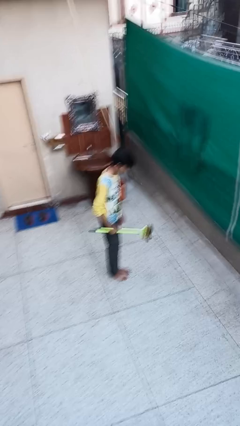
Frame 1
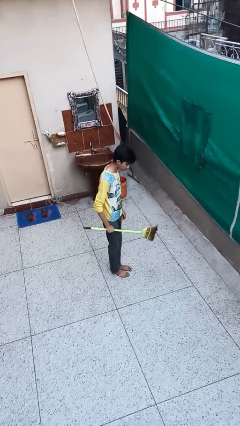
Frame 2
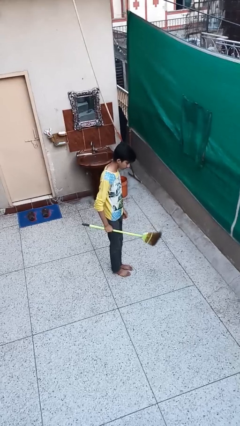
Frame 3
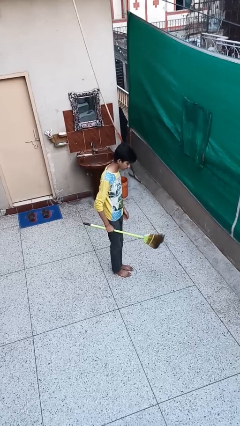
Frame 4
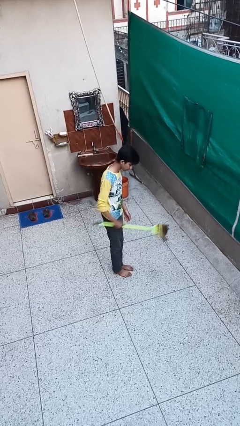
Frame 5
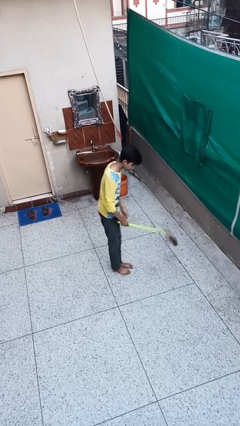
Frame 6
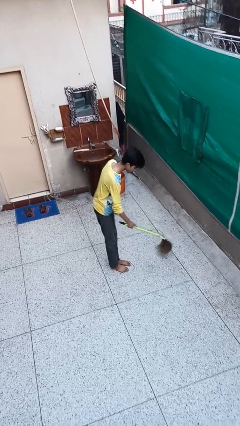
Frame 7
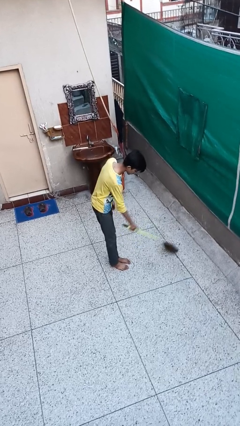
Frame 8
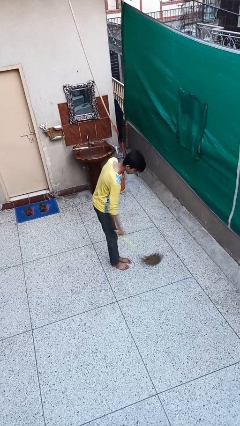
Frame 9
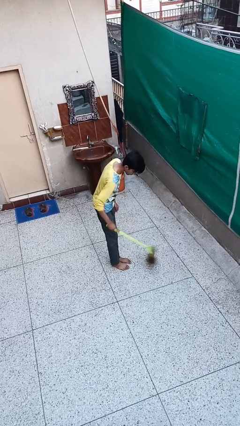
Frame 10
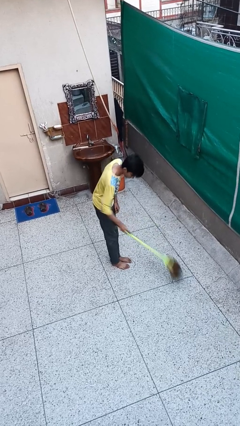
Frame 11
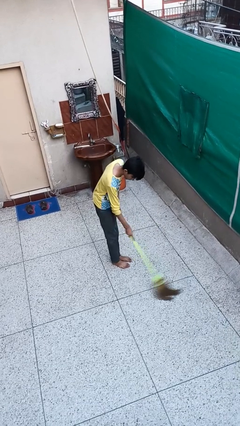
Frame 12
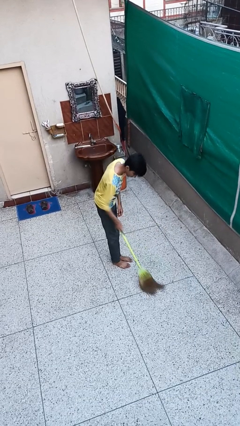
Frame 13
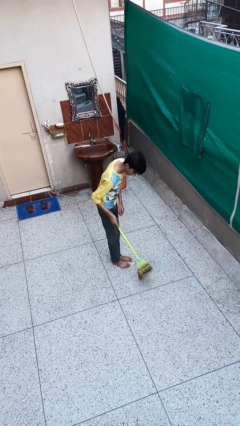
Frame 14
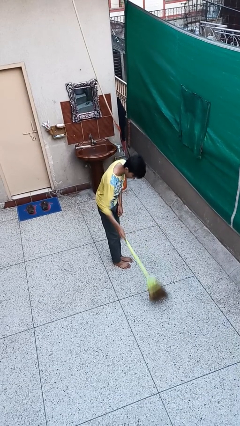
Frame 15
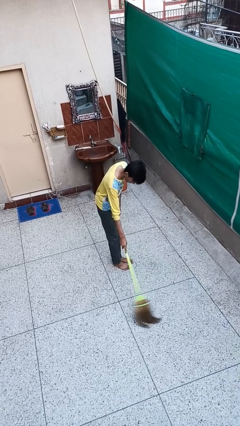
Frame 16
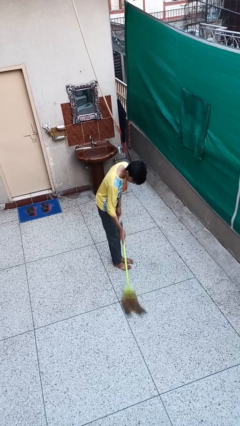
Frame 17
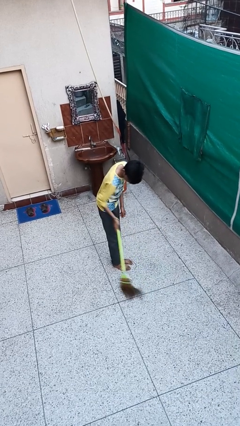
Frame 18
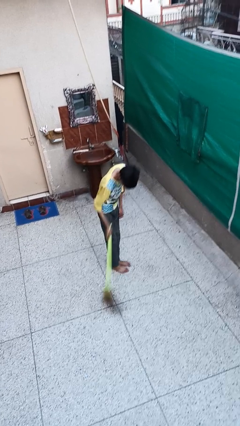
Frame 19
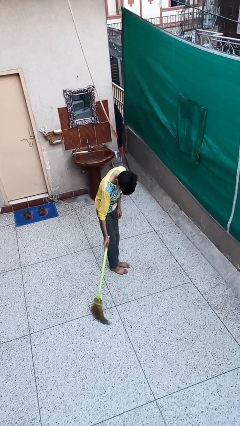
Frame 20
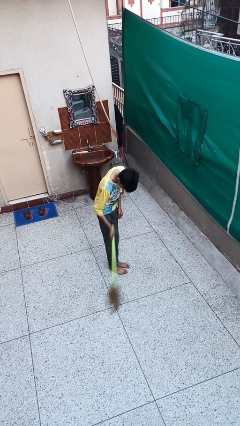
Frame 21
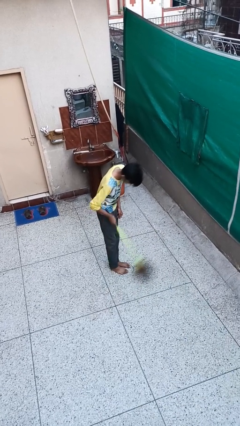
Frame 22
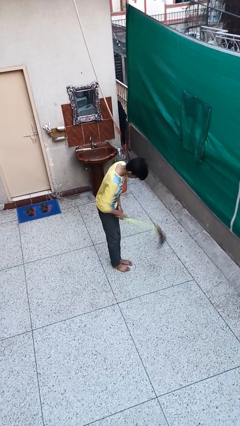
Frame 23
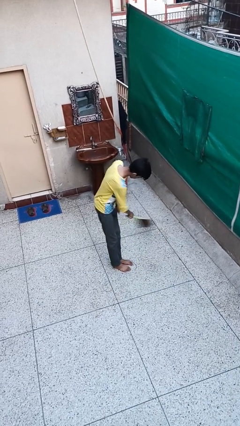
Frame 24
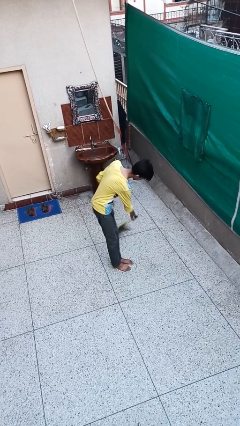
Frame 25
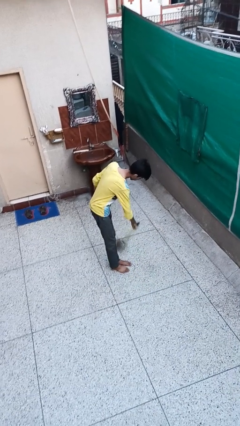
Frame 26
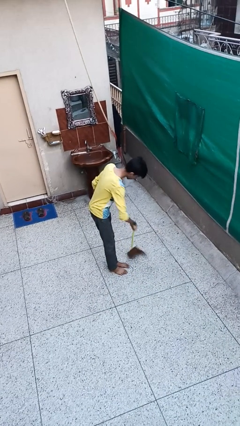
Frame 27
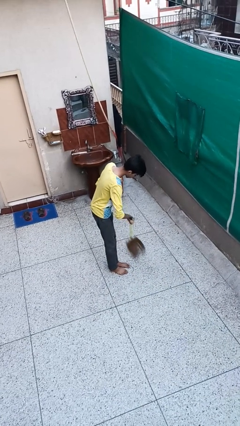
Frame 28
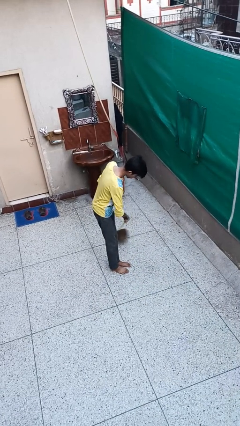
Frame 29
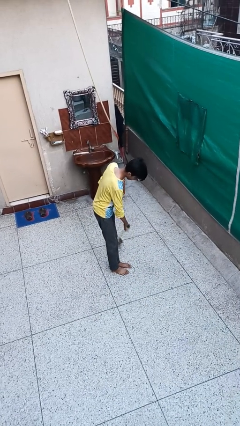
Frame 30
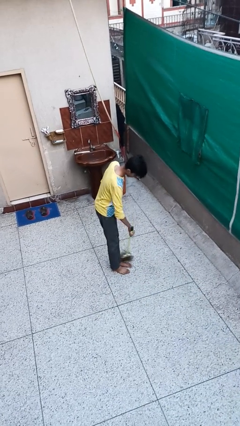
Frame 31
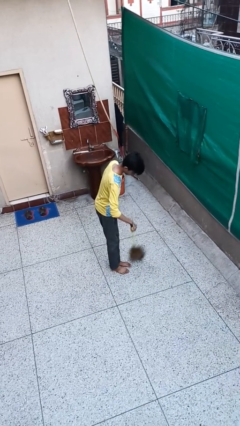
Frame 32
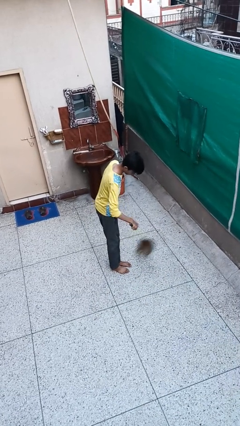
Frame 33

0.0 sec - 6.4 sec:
person sweeps floor

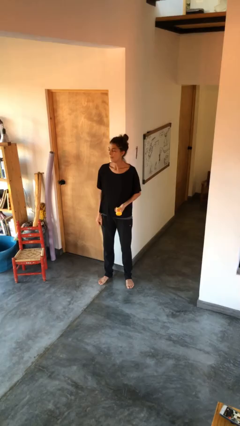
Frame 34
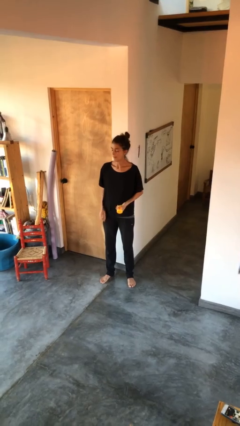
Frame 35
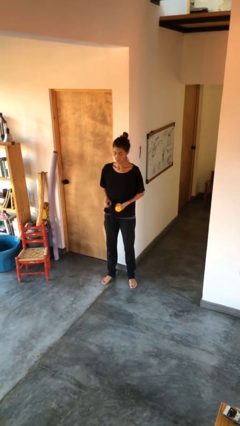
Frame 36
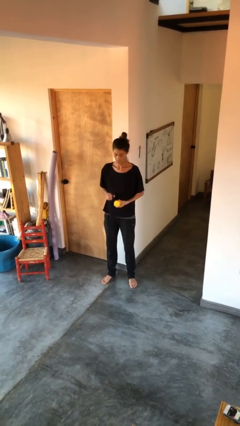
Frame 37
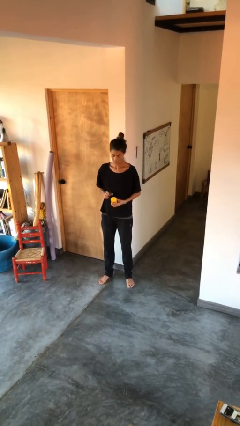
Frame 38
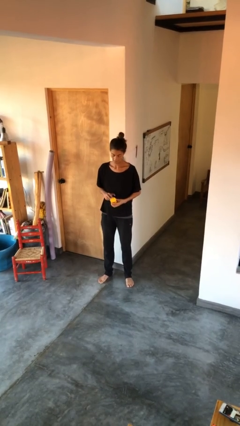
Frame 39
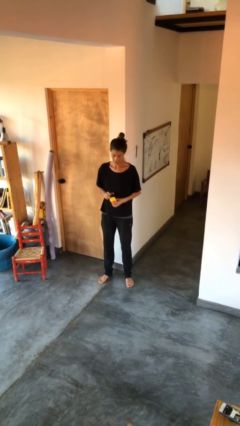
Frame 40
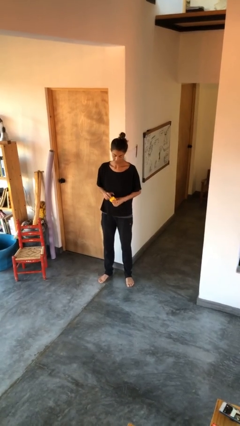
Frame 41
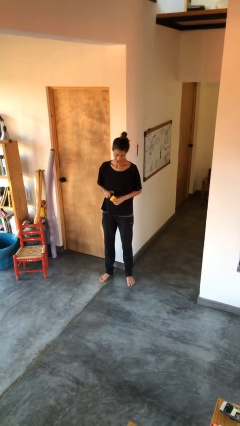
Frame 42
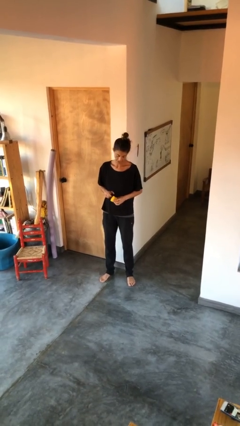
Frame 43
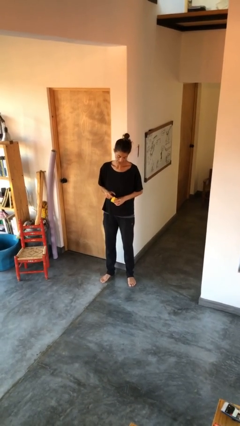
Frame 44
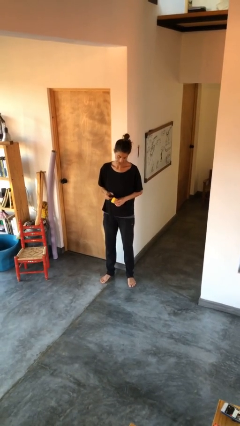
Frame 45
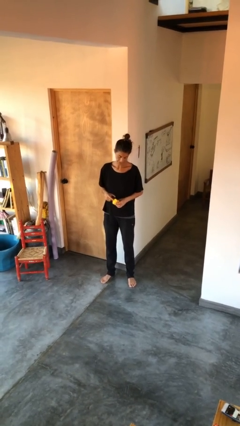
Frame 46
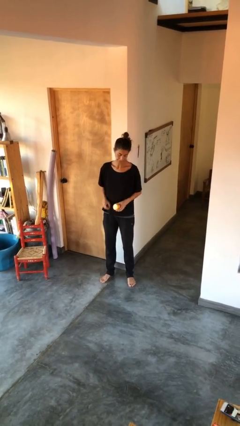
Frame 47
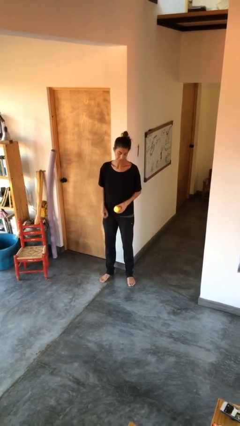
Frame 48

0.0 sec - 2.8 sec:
person taps object with finger

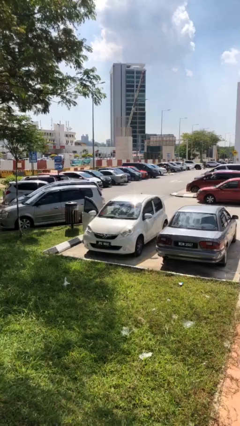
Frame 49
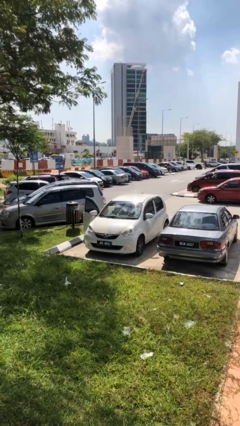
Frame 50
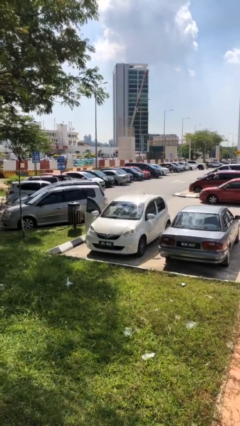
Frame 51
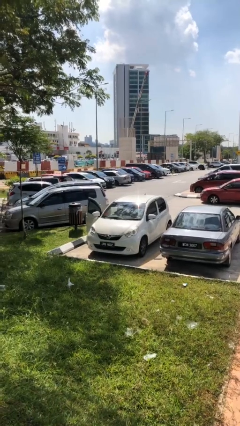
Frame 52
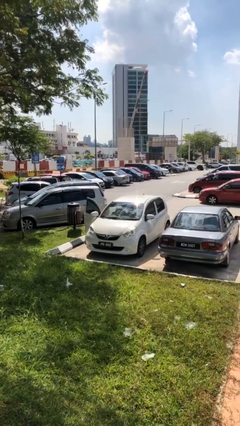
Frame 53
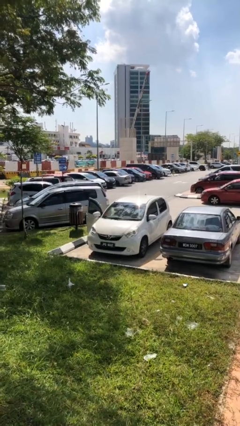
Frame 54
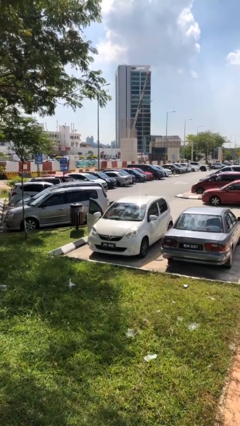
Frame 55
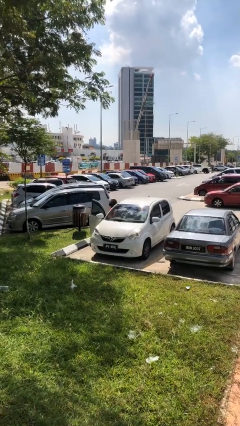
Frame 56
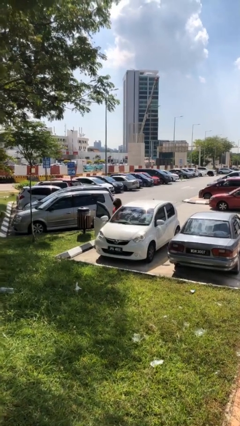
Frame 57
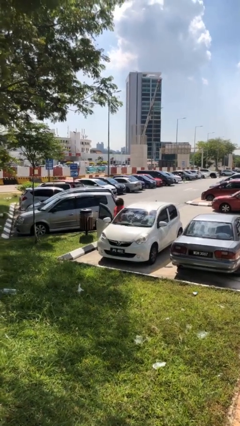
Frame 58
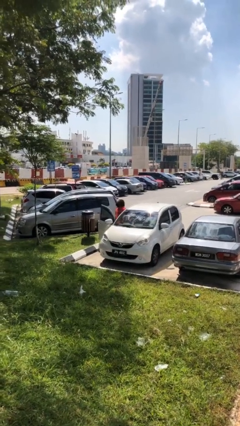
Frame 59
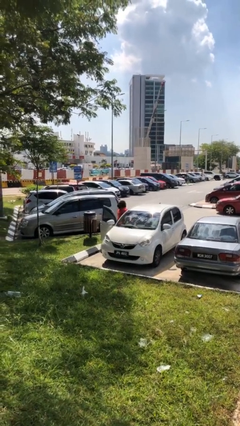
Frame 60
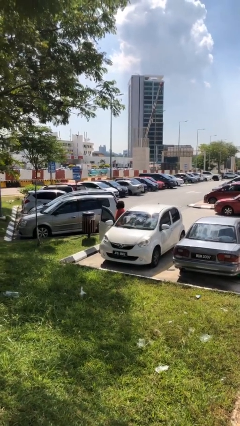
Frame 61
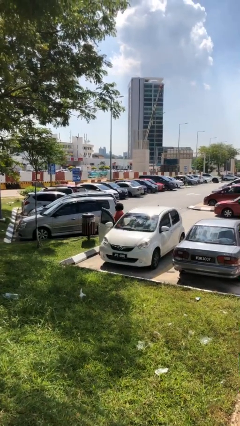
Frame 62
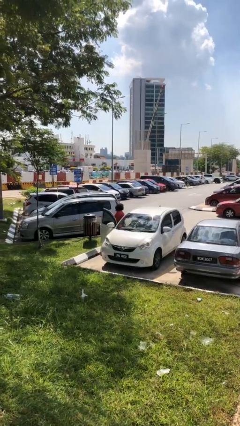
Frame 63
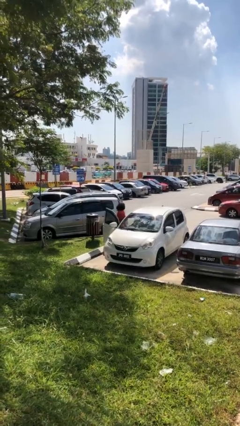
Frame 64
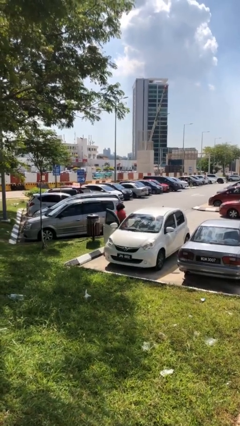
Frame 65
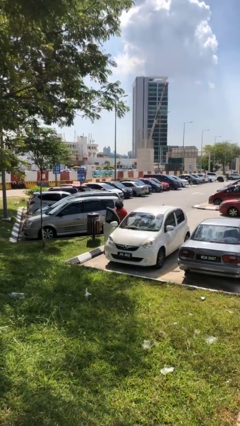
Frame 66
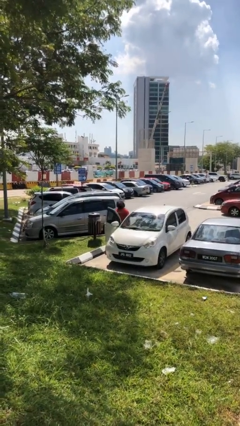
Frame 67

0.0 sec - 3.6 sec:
person exits car

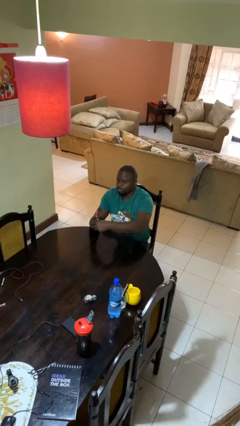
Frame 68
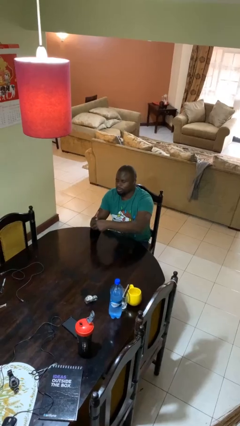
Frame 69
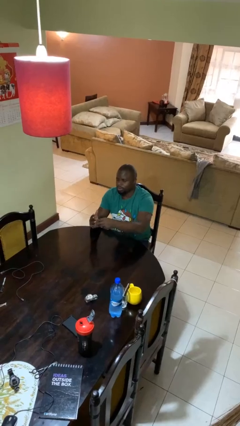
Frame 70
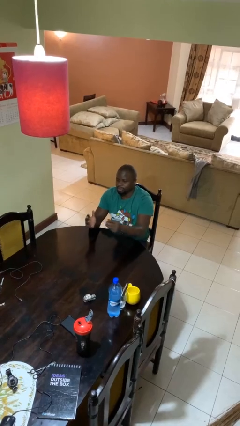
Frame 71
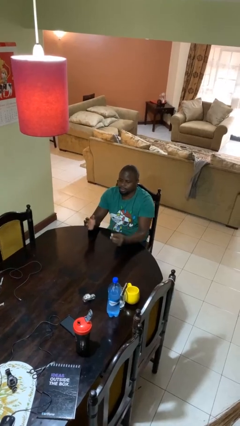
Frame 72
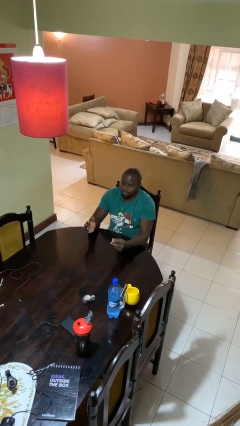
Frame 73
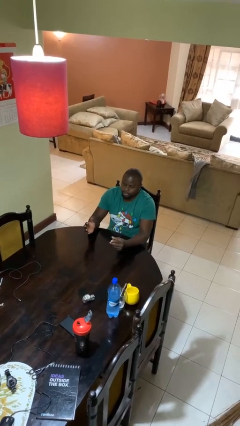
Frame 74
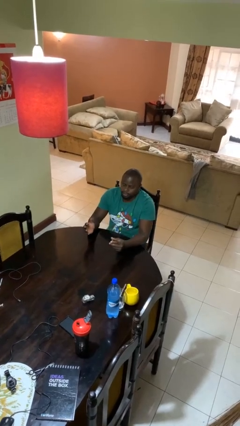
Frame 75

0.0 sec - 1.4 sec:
person takes off ring

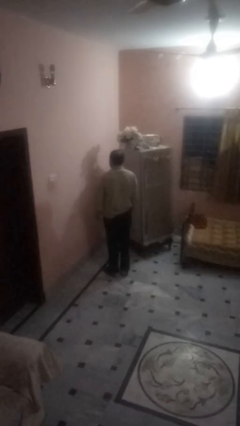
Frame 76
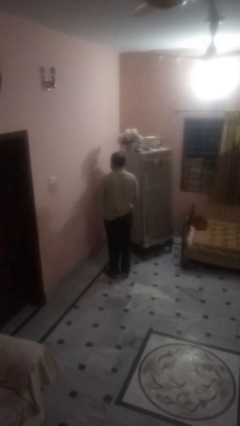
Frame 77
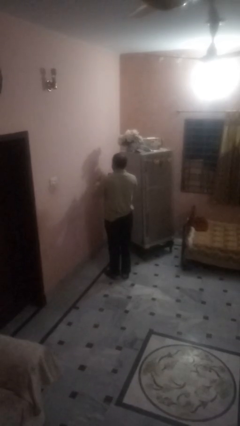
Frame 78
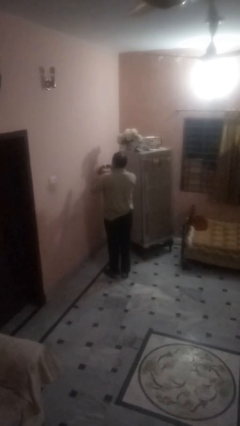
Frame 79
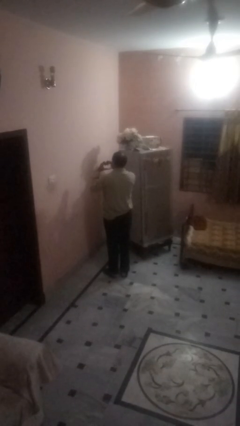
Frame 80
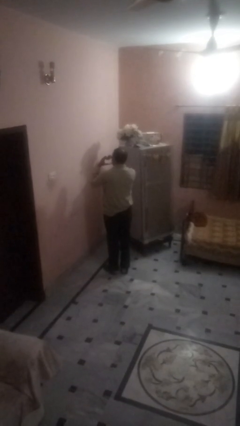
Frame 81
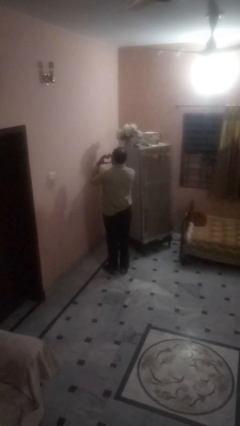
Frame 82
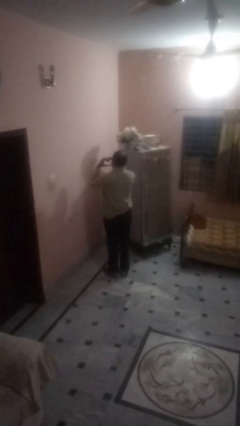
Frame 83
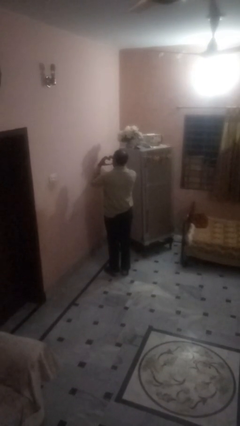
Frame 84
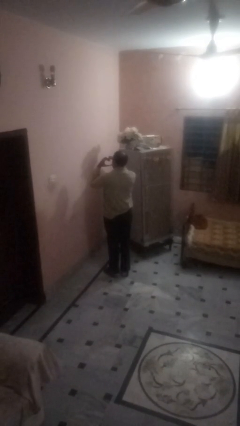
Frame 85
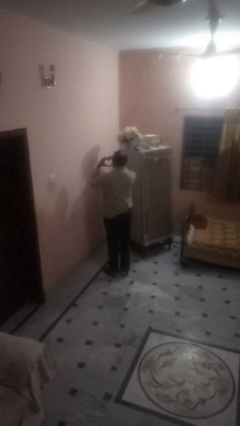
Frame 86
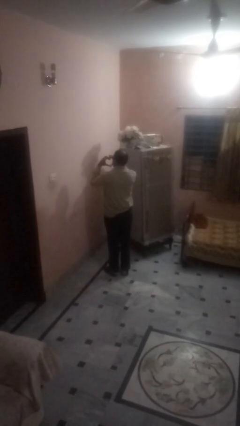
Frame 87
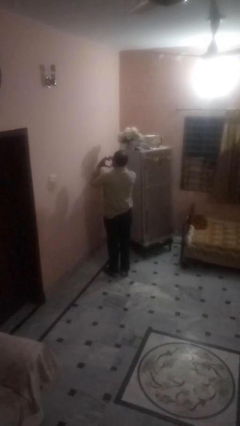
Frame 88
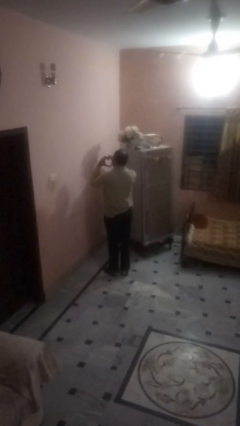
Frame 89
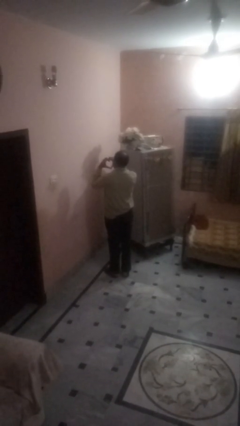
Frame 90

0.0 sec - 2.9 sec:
person gestures heart

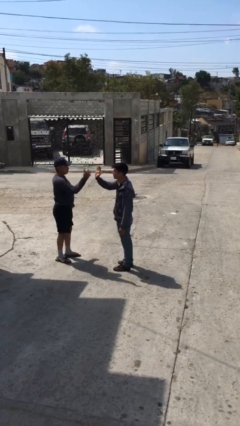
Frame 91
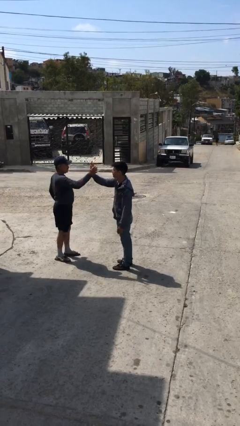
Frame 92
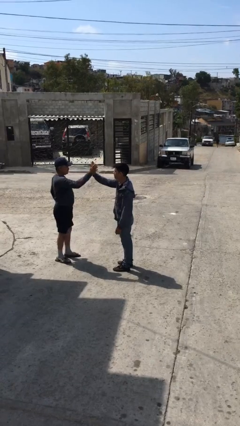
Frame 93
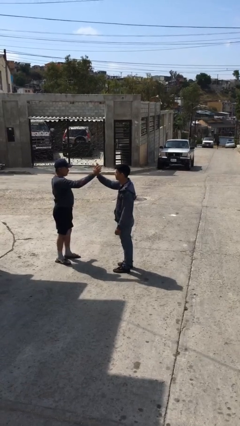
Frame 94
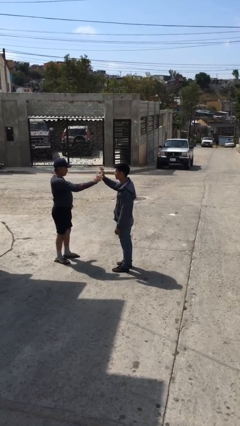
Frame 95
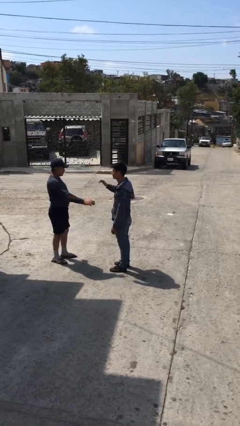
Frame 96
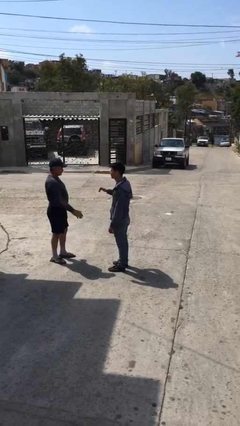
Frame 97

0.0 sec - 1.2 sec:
person highfives hand
